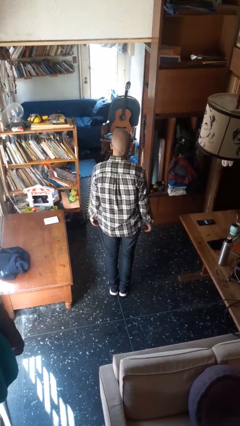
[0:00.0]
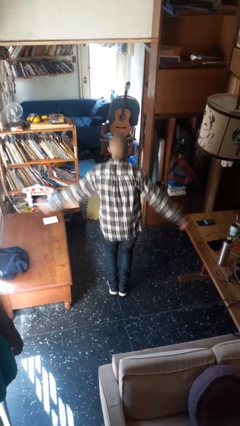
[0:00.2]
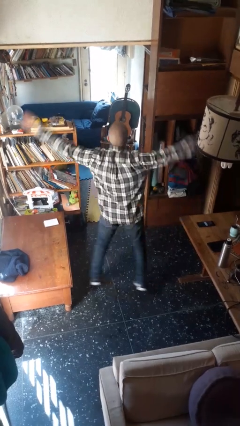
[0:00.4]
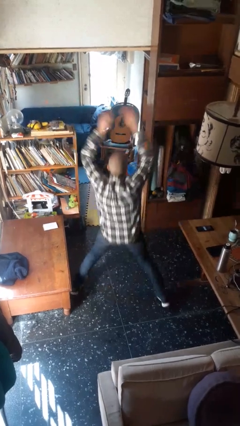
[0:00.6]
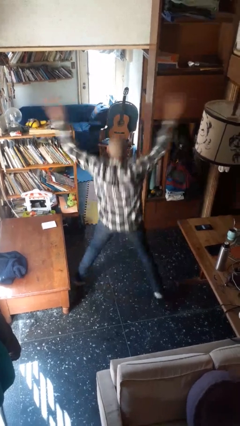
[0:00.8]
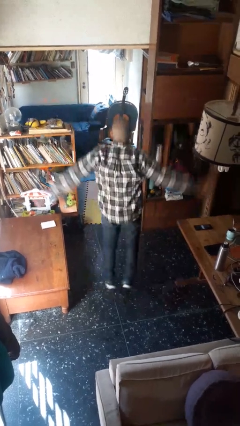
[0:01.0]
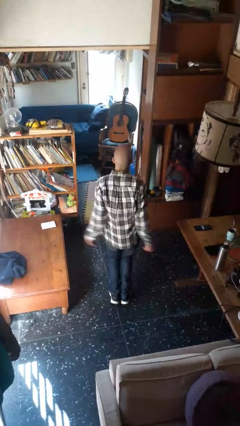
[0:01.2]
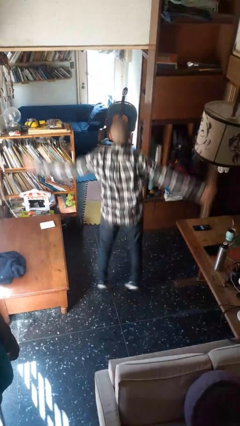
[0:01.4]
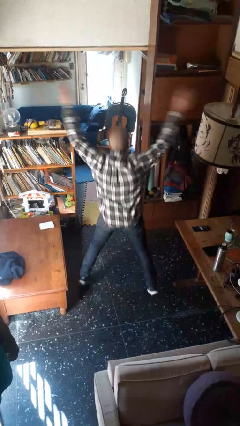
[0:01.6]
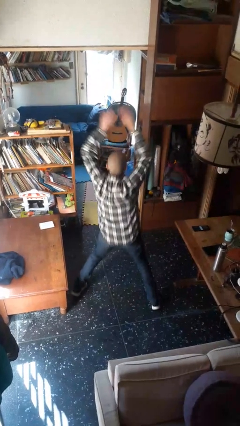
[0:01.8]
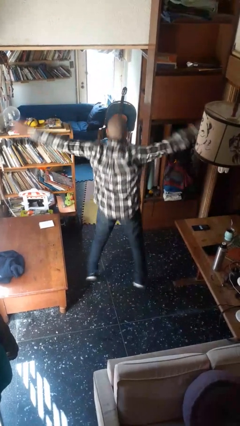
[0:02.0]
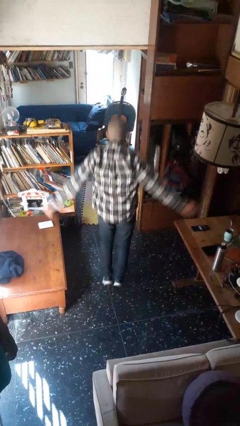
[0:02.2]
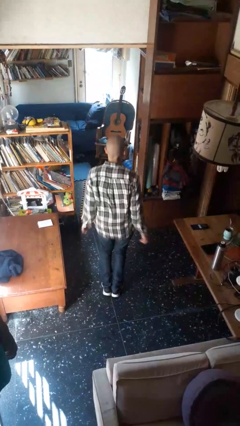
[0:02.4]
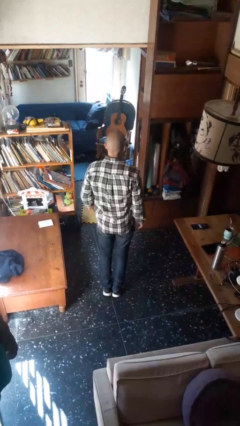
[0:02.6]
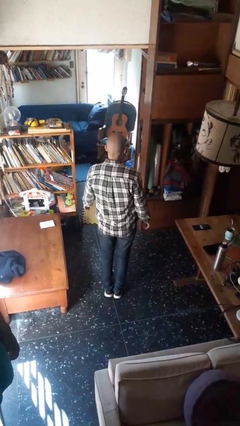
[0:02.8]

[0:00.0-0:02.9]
person exercises with jumping jacks

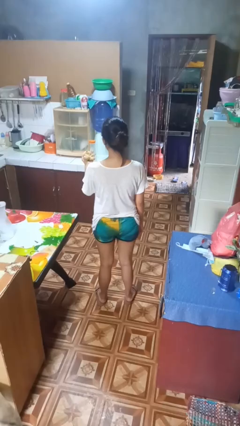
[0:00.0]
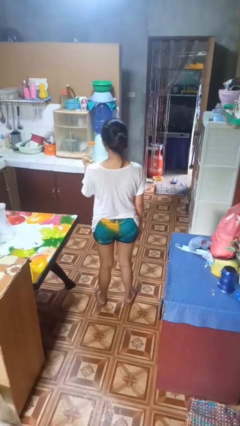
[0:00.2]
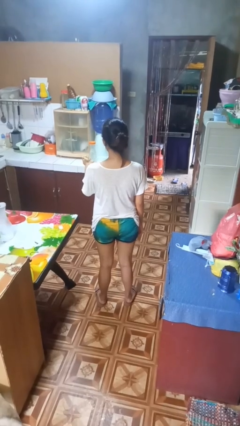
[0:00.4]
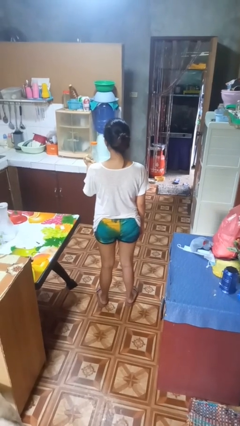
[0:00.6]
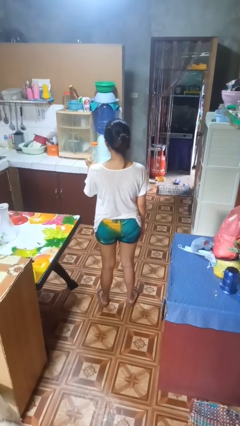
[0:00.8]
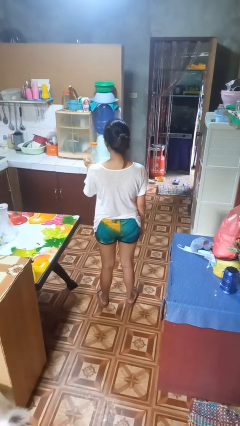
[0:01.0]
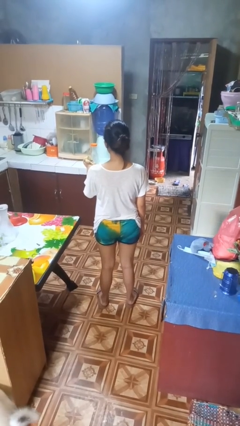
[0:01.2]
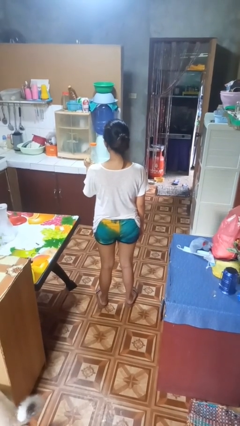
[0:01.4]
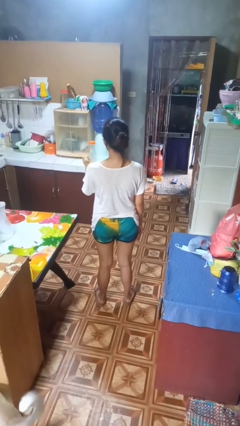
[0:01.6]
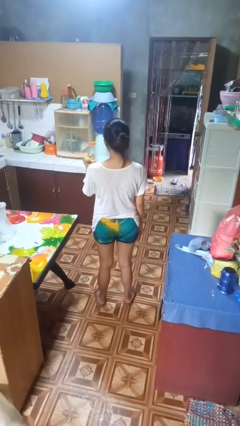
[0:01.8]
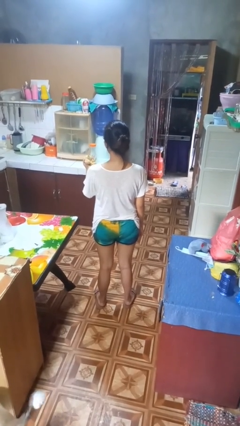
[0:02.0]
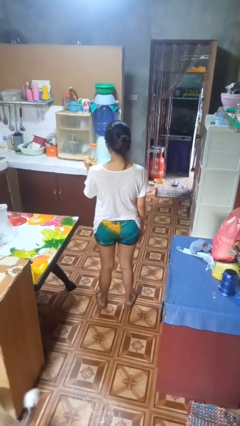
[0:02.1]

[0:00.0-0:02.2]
person squeezes object

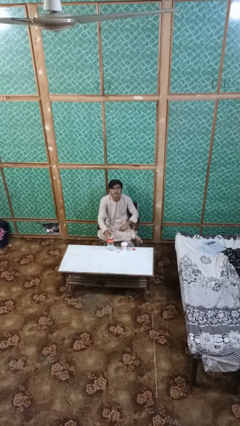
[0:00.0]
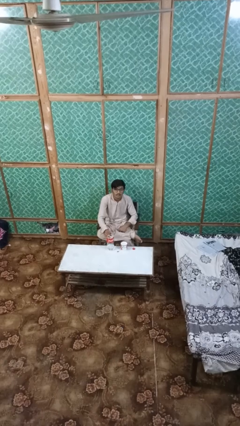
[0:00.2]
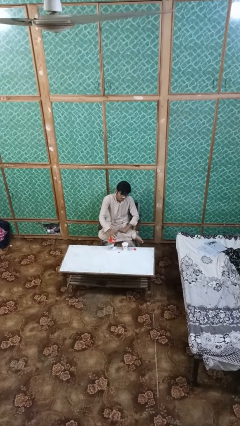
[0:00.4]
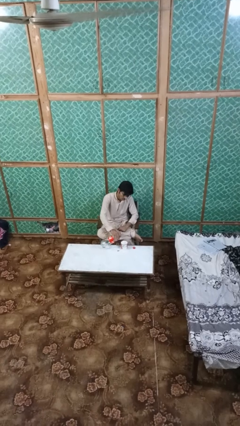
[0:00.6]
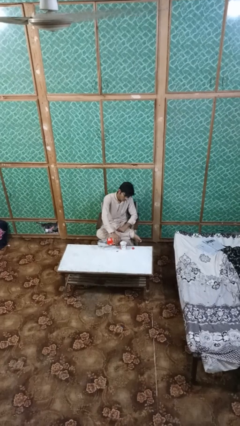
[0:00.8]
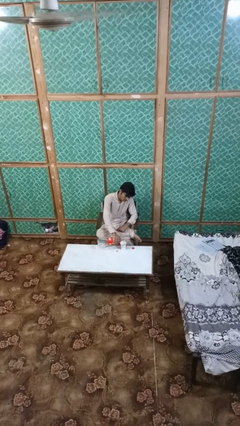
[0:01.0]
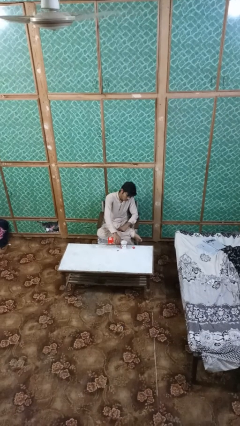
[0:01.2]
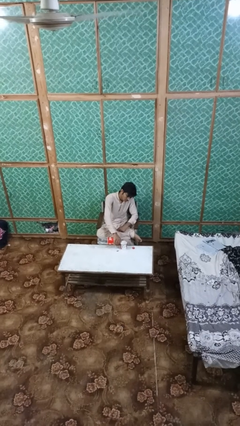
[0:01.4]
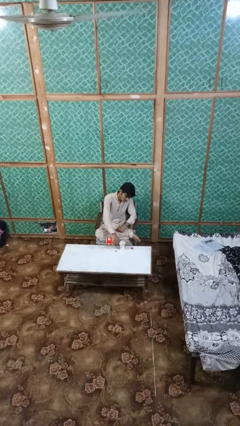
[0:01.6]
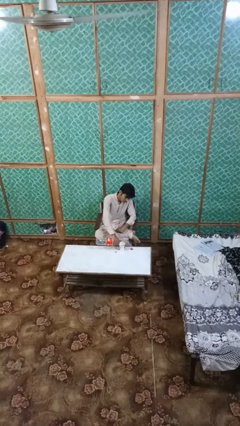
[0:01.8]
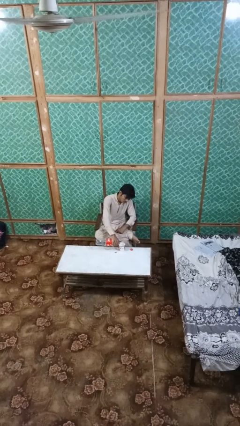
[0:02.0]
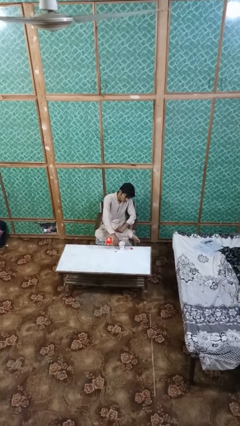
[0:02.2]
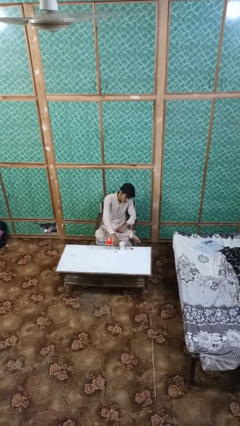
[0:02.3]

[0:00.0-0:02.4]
person pours liquid into cup

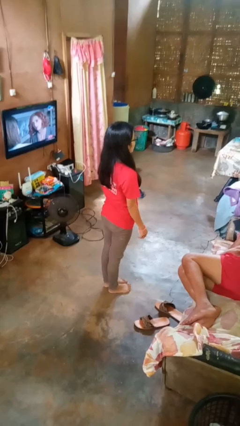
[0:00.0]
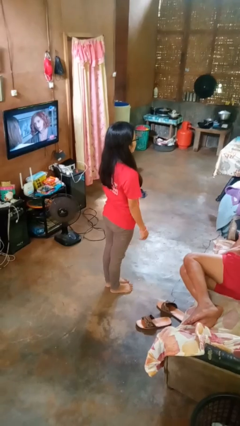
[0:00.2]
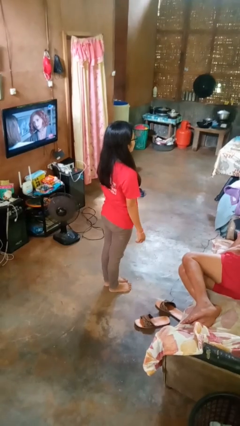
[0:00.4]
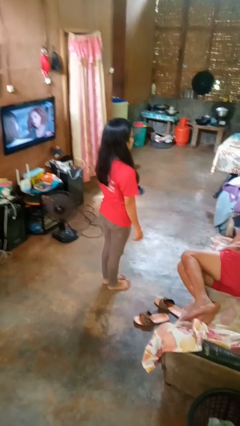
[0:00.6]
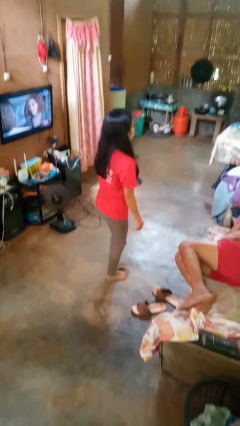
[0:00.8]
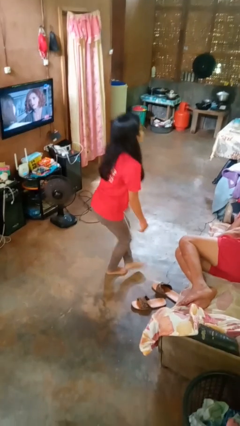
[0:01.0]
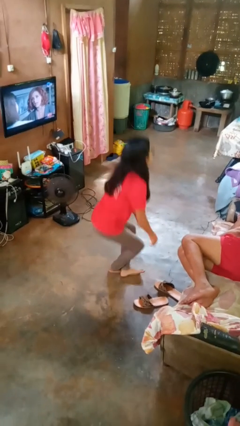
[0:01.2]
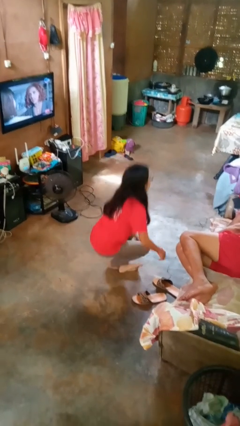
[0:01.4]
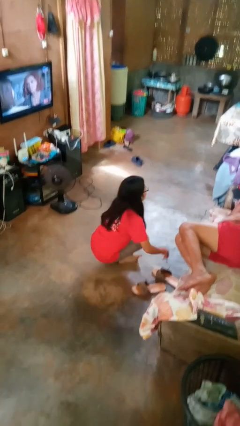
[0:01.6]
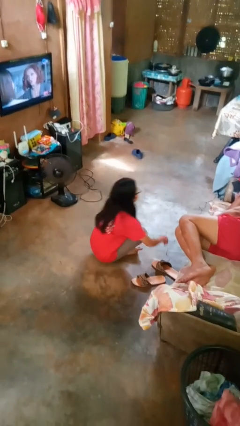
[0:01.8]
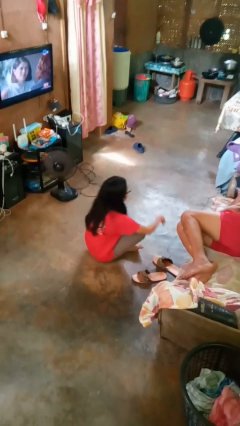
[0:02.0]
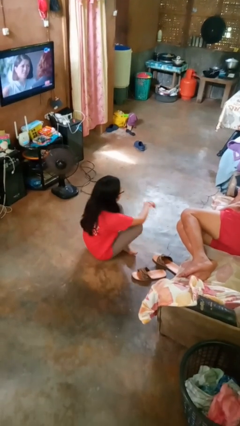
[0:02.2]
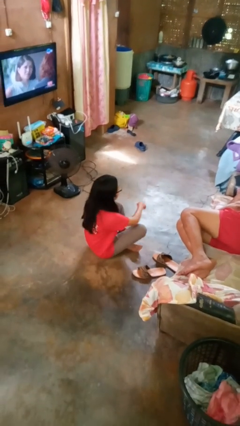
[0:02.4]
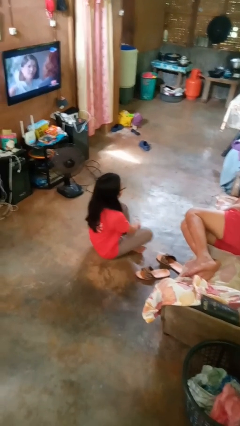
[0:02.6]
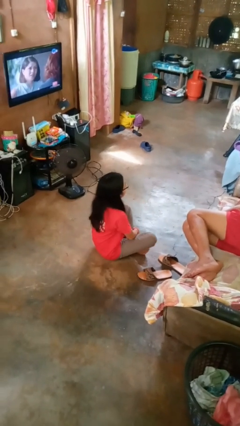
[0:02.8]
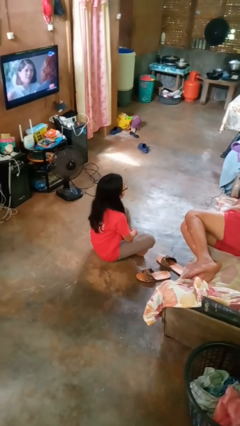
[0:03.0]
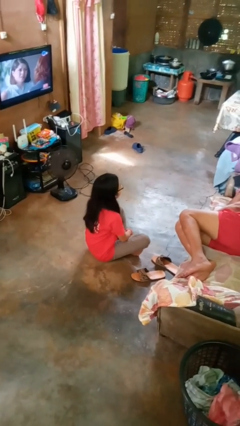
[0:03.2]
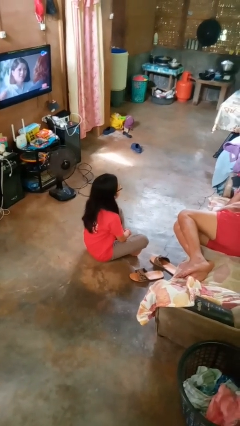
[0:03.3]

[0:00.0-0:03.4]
person sits crisscross

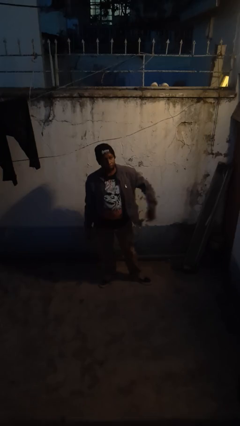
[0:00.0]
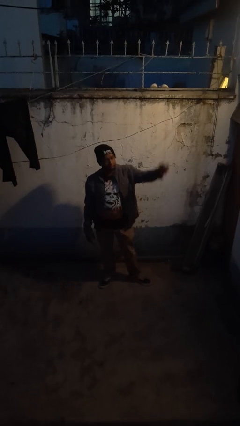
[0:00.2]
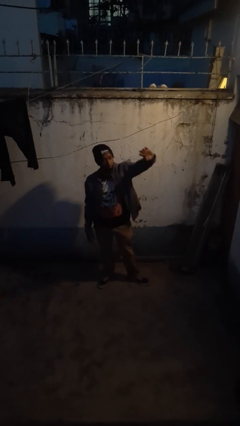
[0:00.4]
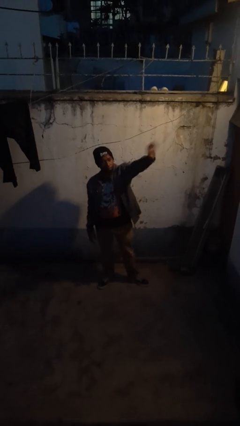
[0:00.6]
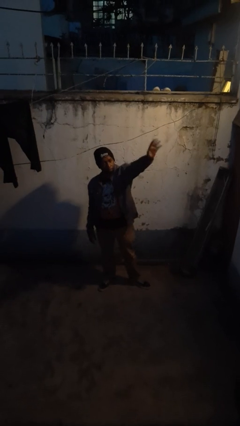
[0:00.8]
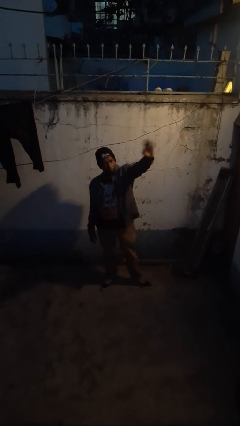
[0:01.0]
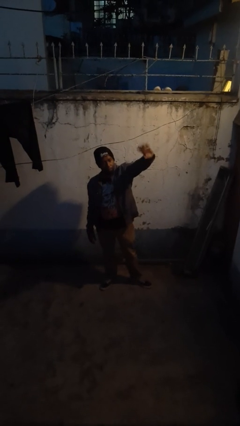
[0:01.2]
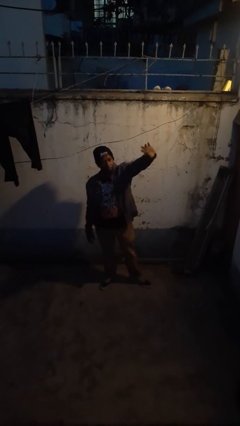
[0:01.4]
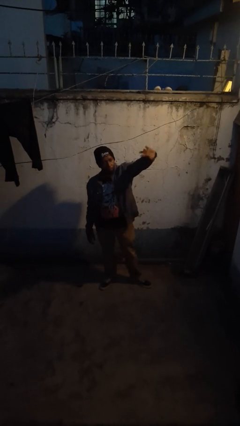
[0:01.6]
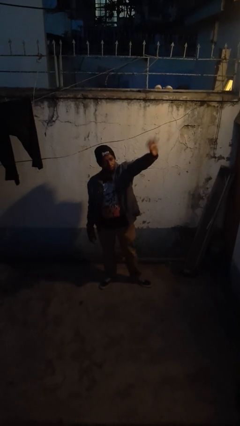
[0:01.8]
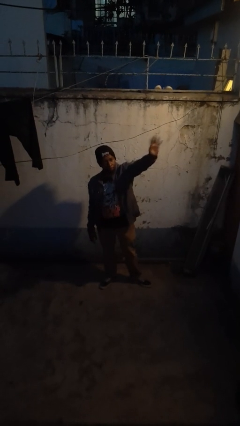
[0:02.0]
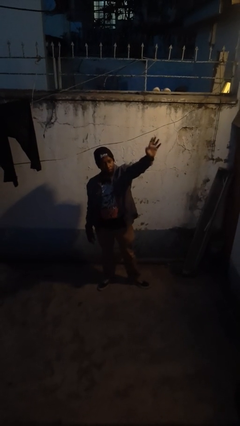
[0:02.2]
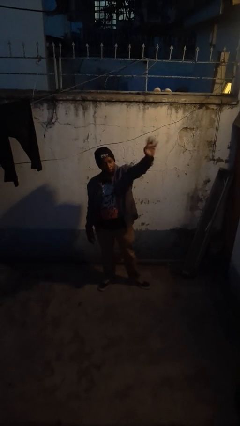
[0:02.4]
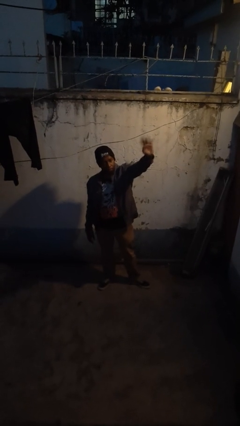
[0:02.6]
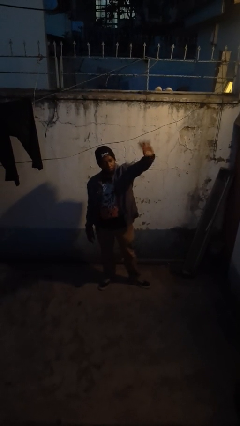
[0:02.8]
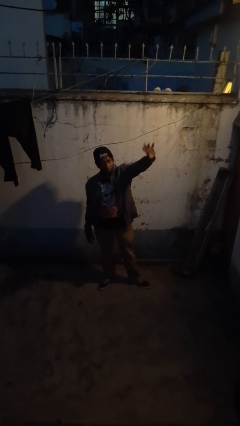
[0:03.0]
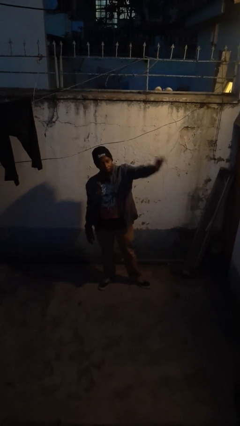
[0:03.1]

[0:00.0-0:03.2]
person waves at person

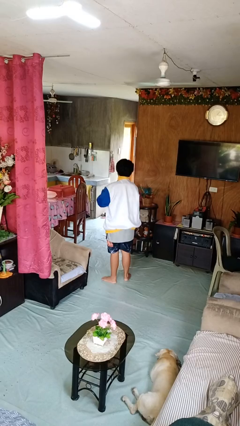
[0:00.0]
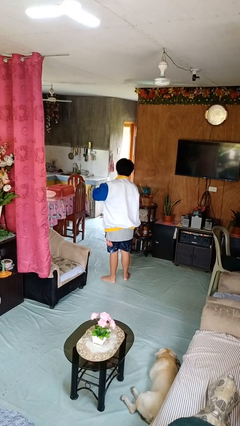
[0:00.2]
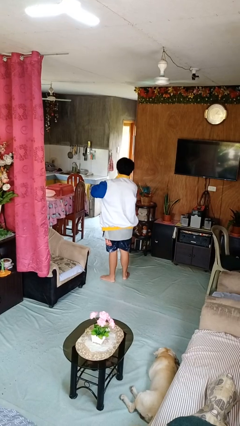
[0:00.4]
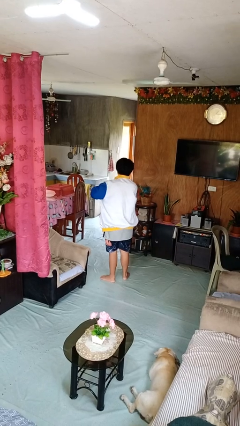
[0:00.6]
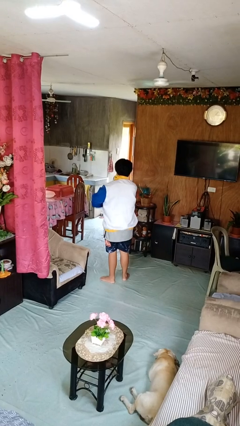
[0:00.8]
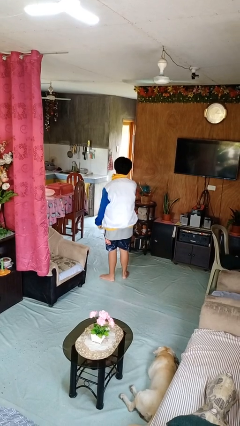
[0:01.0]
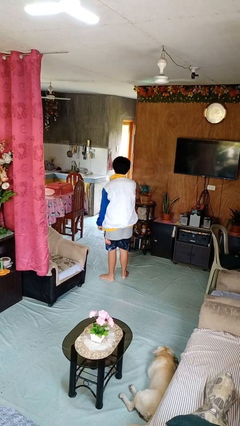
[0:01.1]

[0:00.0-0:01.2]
person unzips jacket

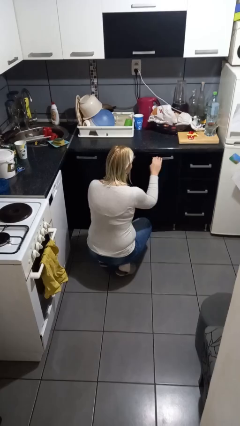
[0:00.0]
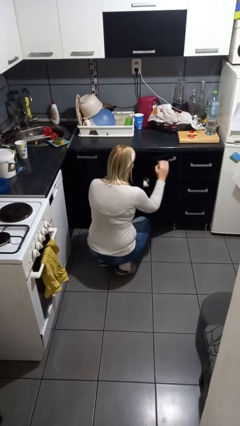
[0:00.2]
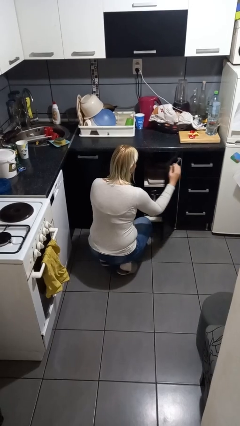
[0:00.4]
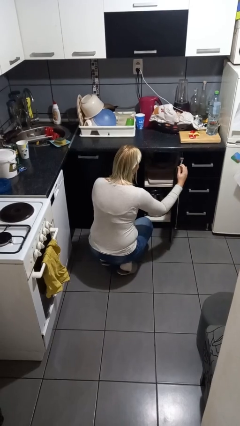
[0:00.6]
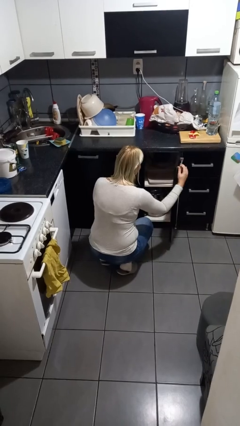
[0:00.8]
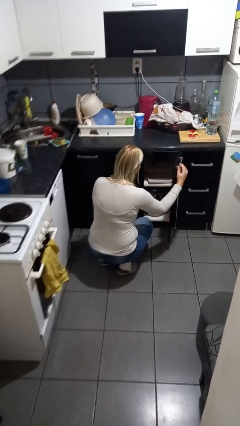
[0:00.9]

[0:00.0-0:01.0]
person opens cabinet

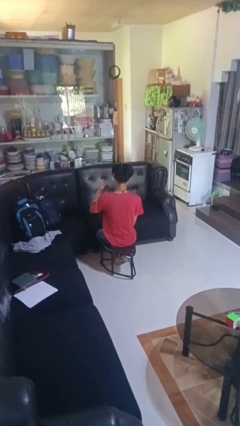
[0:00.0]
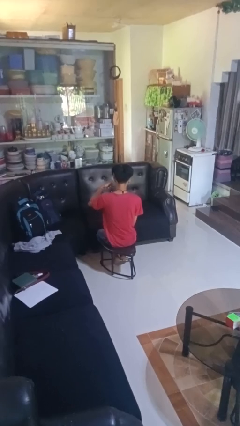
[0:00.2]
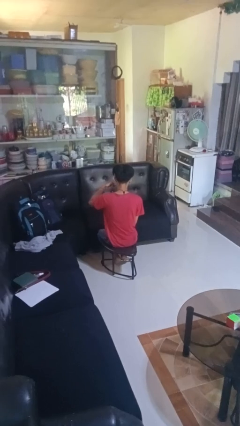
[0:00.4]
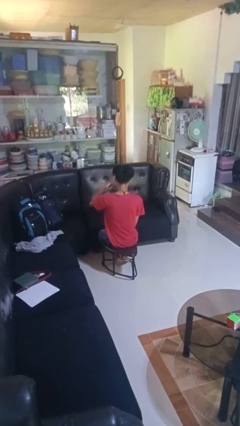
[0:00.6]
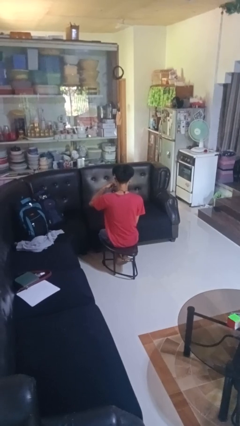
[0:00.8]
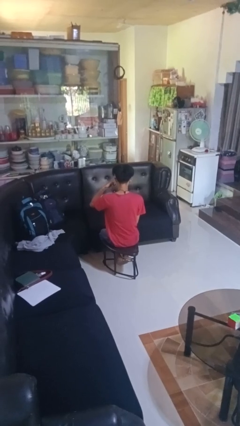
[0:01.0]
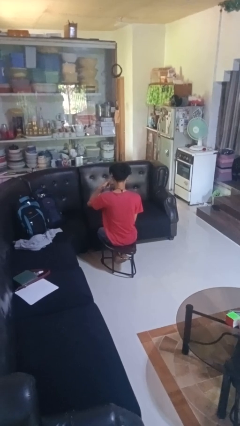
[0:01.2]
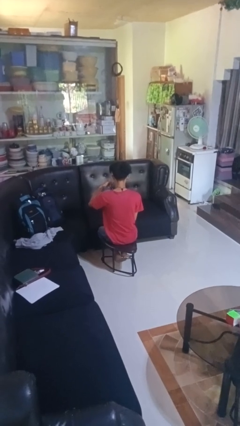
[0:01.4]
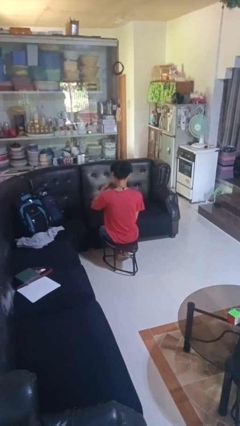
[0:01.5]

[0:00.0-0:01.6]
person gestures call me
